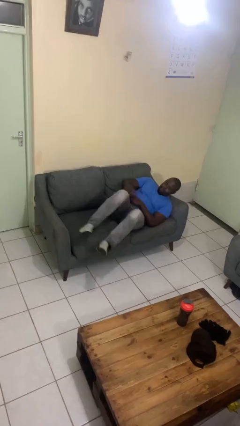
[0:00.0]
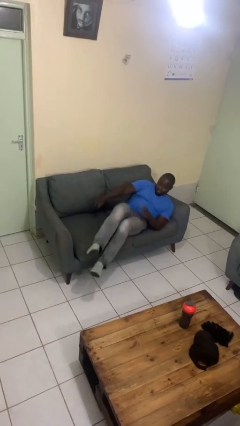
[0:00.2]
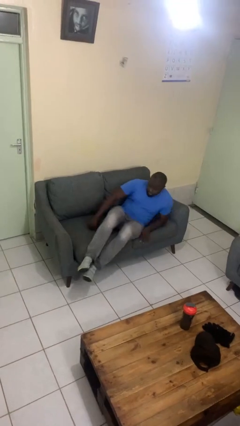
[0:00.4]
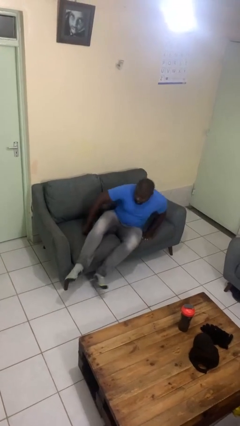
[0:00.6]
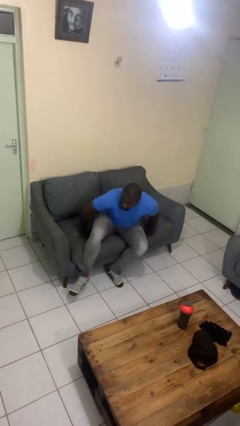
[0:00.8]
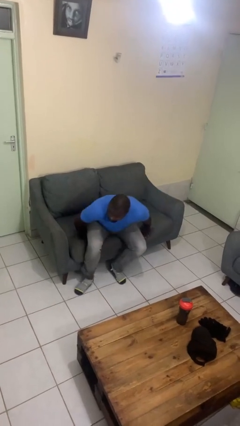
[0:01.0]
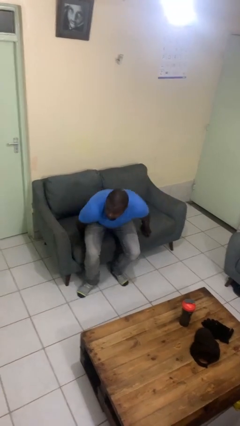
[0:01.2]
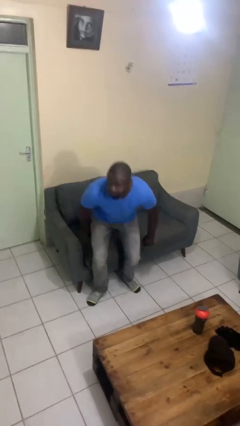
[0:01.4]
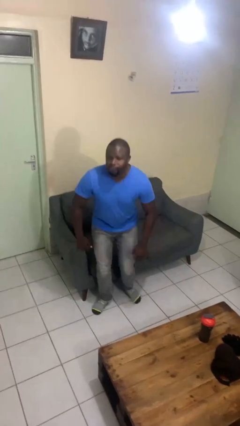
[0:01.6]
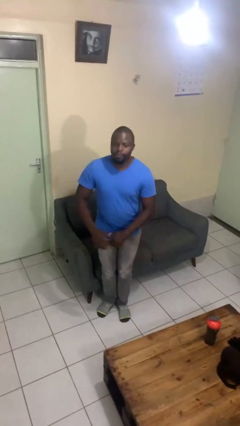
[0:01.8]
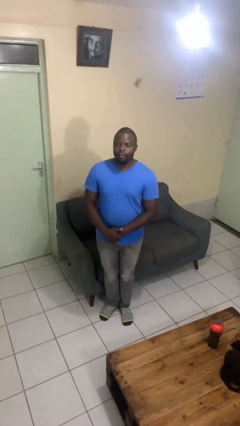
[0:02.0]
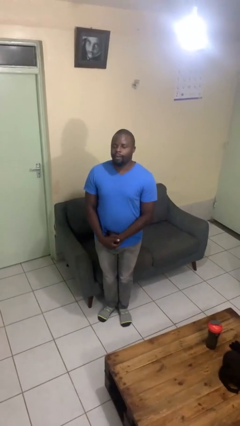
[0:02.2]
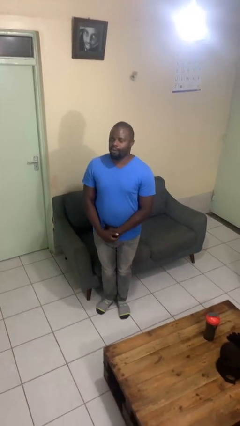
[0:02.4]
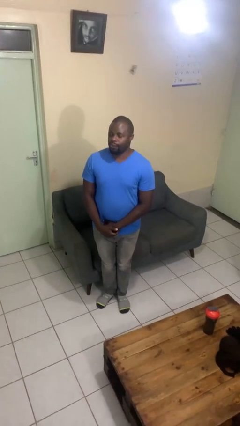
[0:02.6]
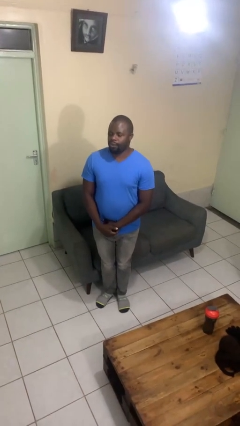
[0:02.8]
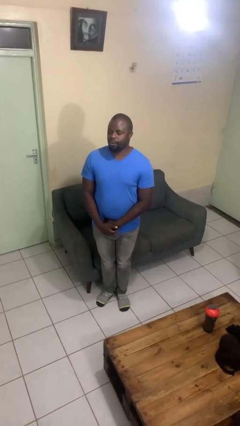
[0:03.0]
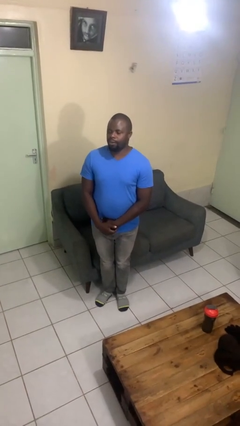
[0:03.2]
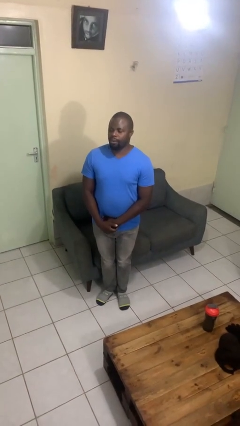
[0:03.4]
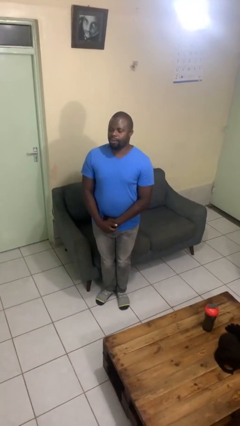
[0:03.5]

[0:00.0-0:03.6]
person stands up

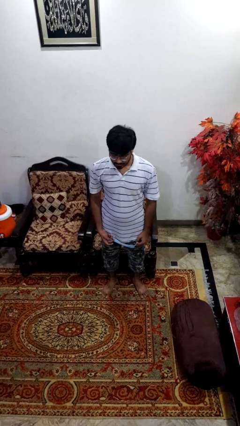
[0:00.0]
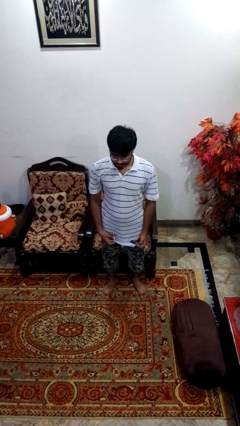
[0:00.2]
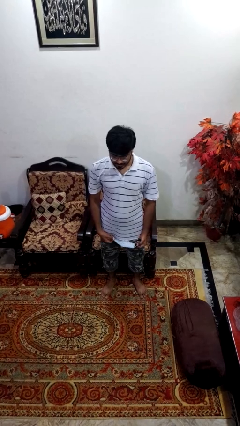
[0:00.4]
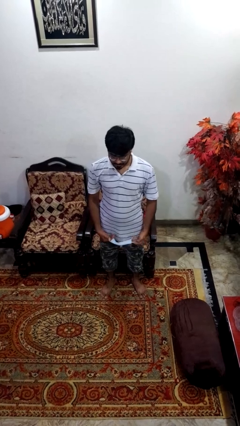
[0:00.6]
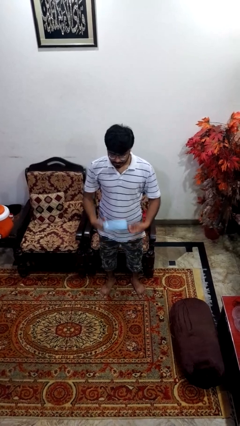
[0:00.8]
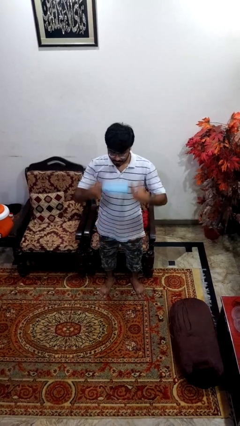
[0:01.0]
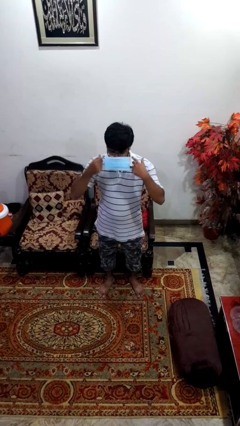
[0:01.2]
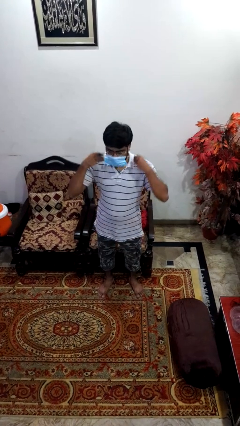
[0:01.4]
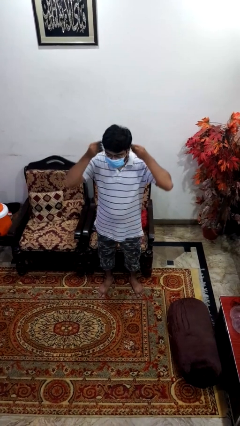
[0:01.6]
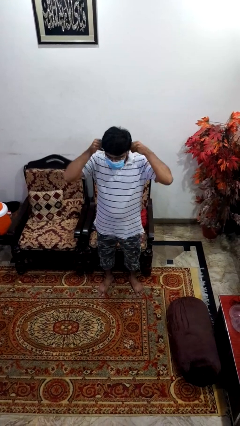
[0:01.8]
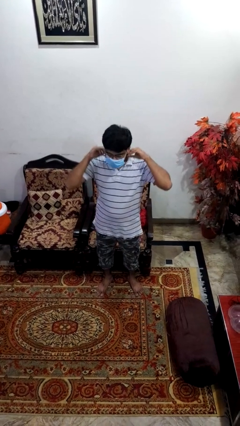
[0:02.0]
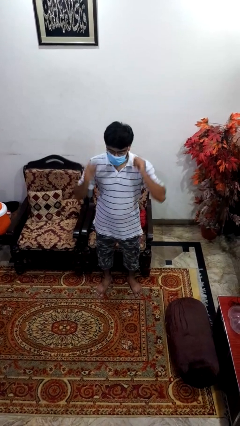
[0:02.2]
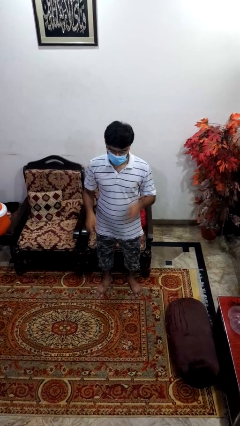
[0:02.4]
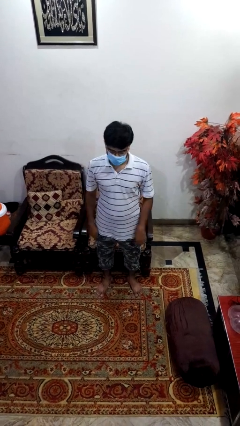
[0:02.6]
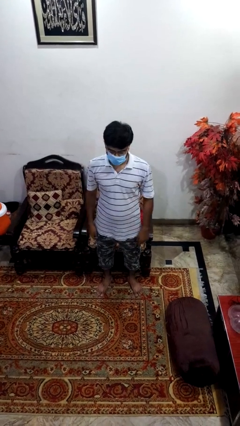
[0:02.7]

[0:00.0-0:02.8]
person puts on facemask

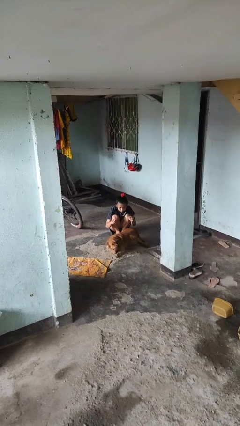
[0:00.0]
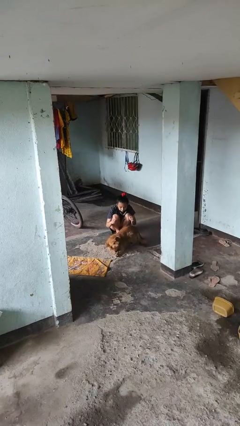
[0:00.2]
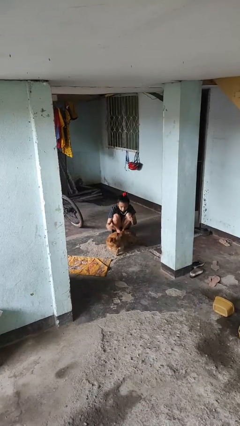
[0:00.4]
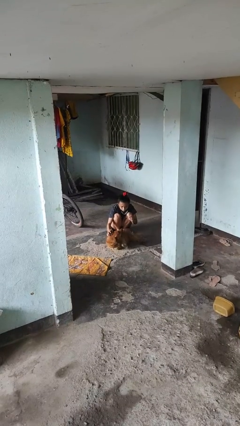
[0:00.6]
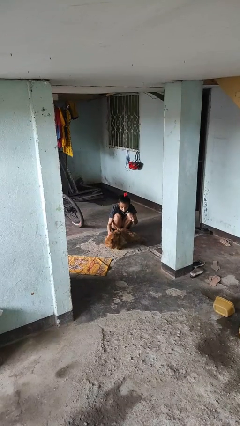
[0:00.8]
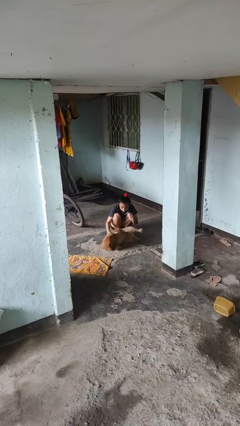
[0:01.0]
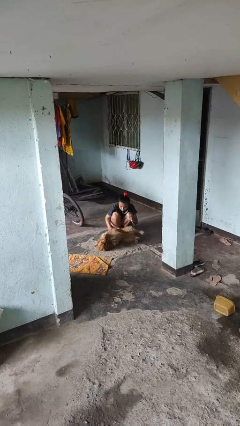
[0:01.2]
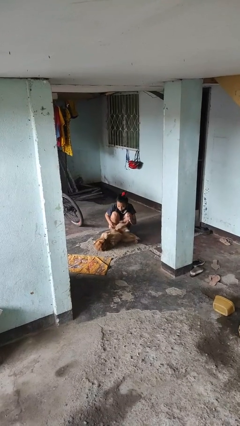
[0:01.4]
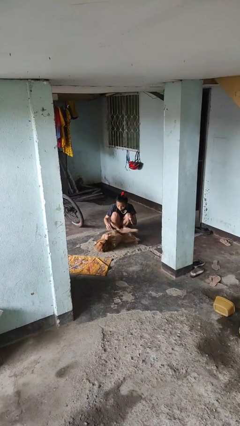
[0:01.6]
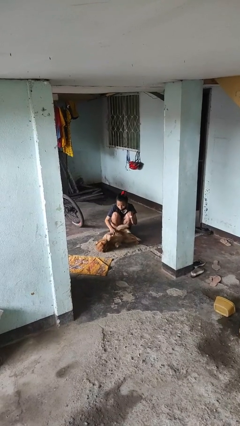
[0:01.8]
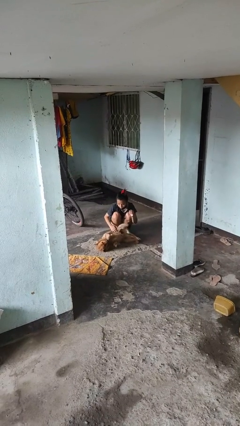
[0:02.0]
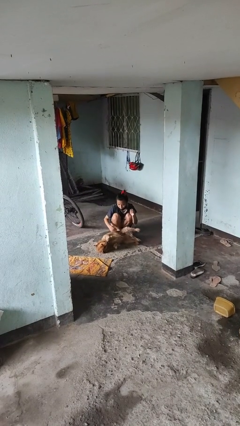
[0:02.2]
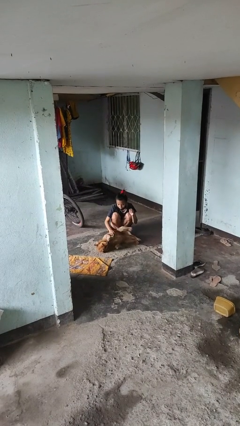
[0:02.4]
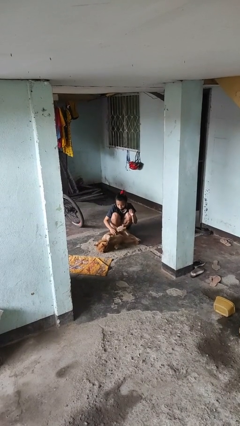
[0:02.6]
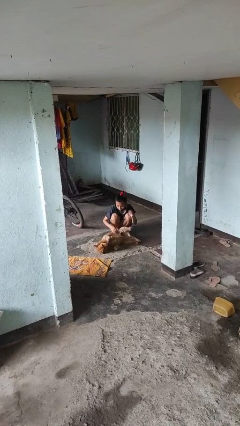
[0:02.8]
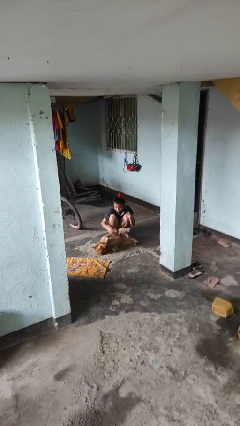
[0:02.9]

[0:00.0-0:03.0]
person pets dog

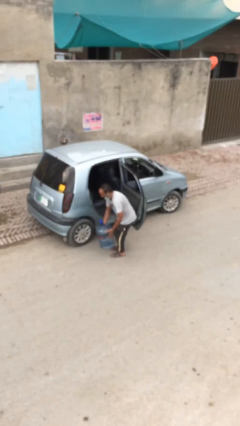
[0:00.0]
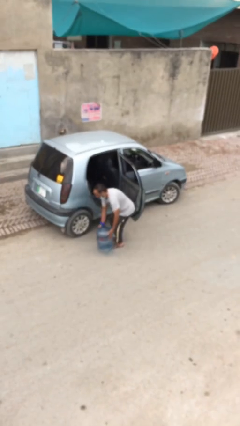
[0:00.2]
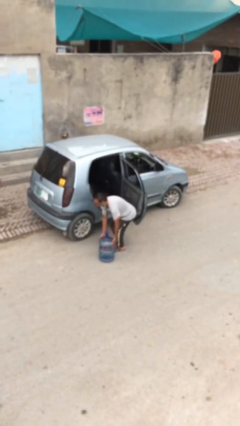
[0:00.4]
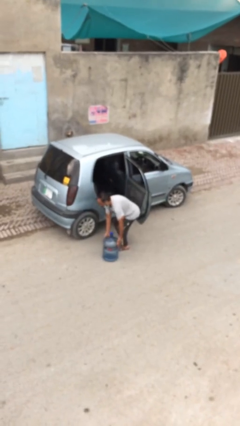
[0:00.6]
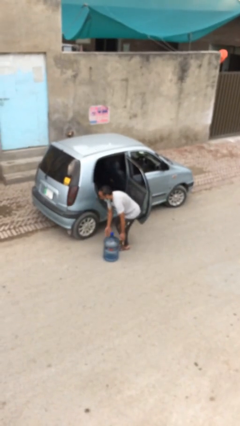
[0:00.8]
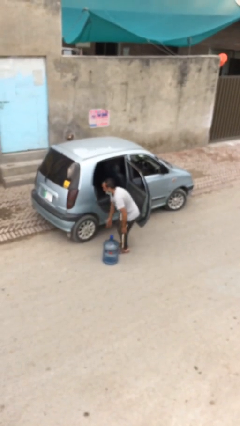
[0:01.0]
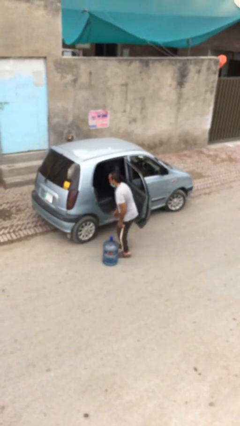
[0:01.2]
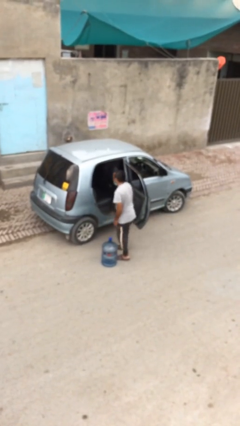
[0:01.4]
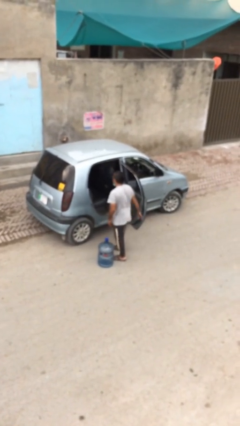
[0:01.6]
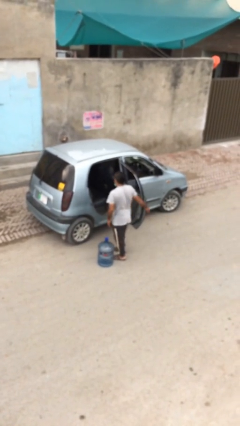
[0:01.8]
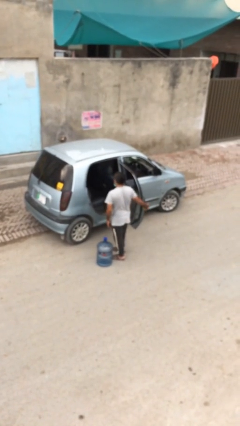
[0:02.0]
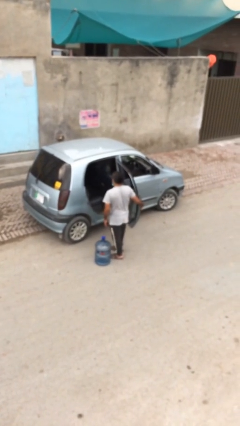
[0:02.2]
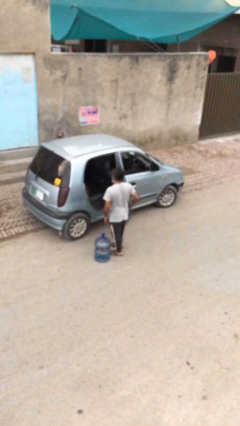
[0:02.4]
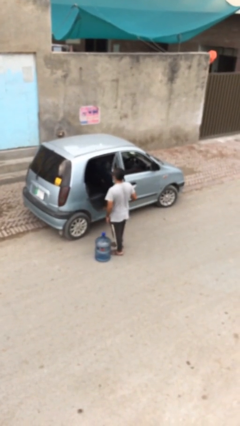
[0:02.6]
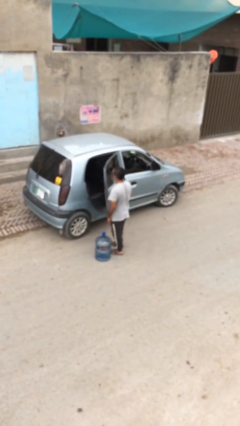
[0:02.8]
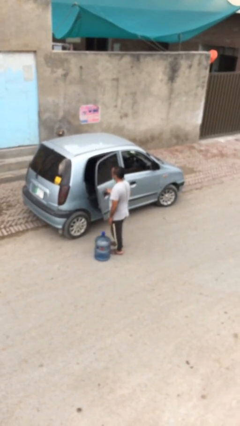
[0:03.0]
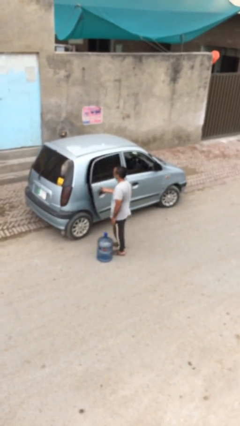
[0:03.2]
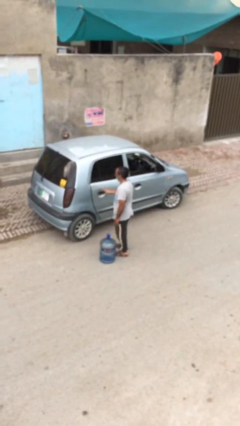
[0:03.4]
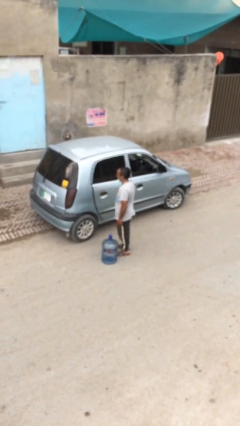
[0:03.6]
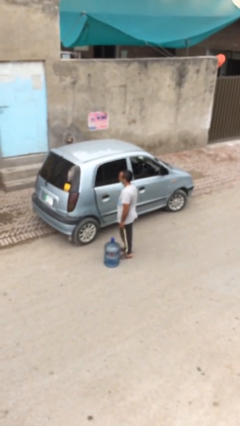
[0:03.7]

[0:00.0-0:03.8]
person closes car door

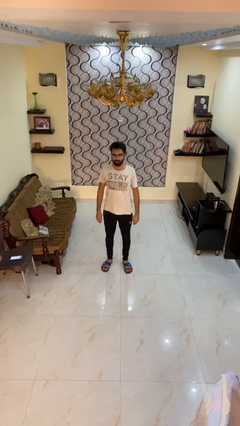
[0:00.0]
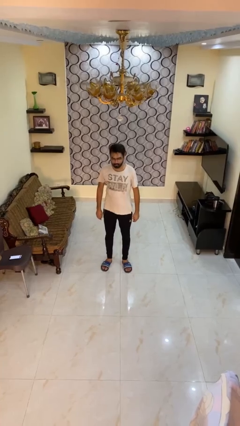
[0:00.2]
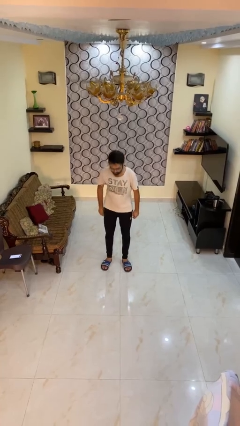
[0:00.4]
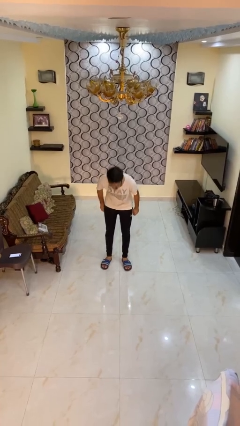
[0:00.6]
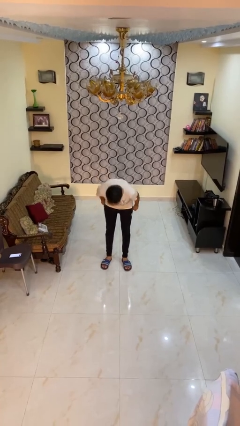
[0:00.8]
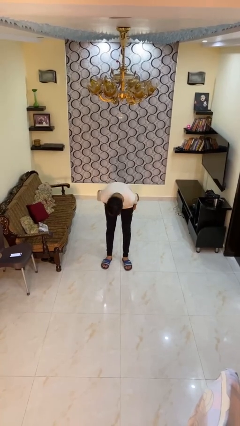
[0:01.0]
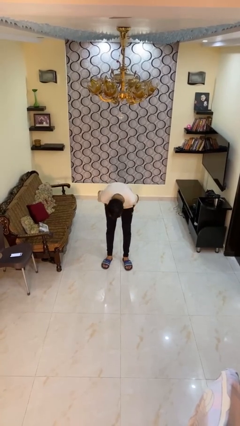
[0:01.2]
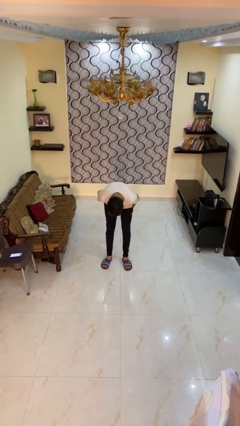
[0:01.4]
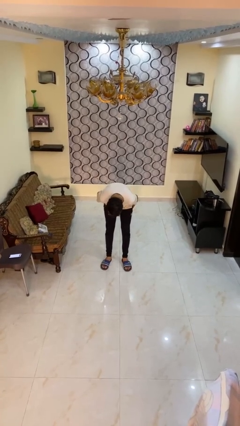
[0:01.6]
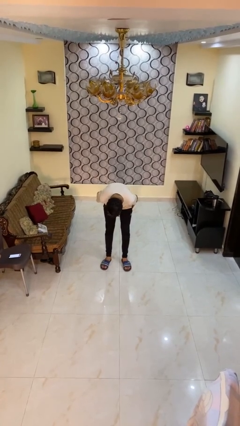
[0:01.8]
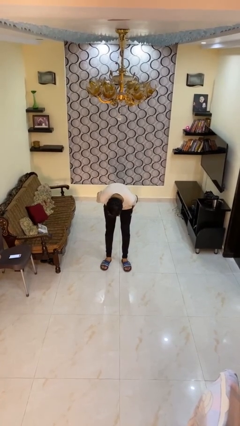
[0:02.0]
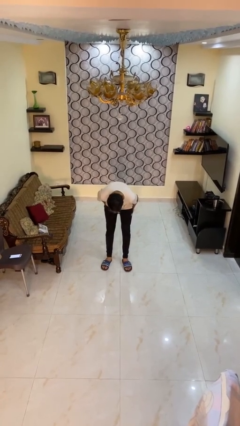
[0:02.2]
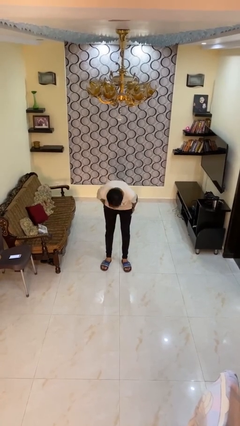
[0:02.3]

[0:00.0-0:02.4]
person bows

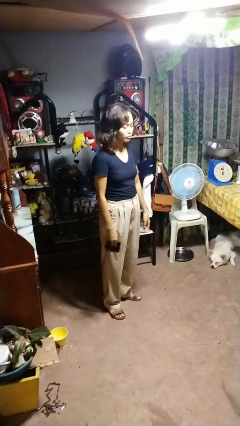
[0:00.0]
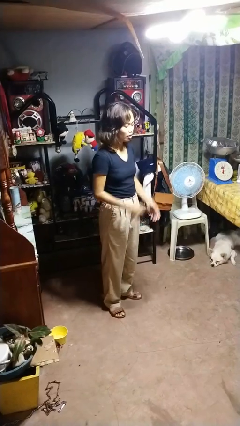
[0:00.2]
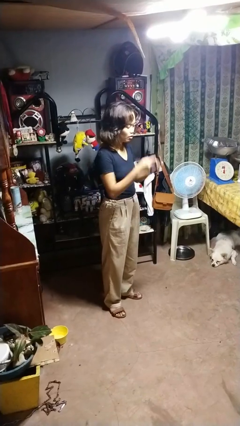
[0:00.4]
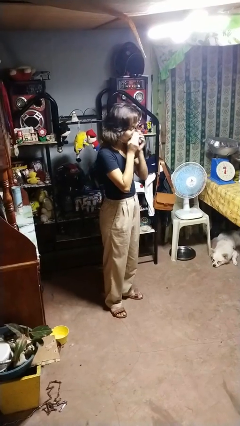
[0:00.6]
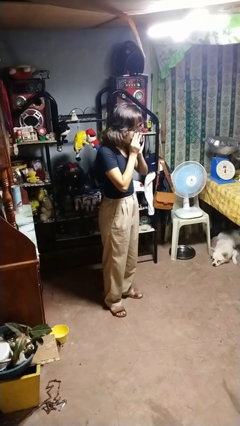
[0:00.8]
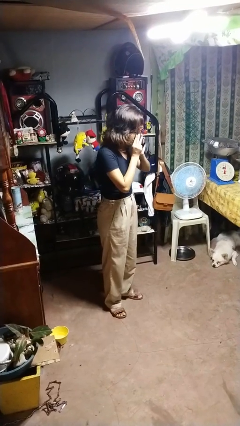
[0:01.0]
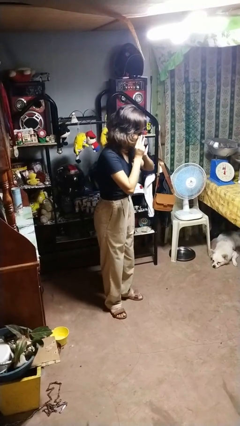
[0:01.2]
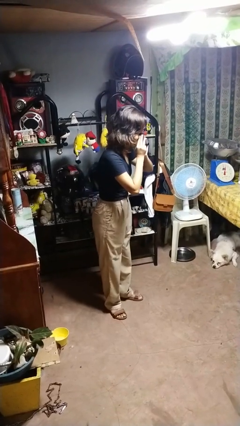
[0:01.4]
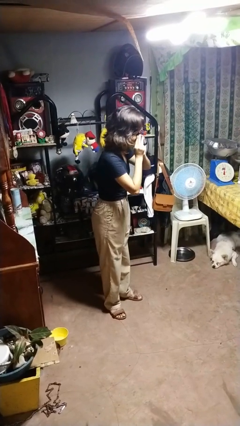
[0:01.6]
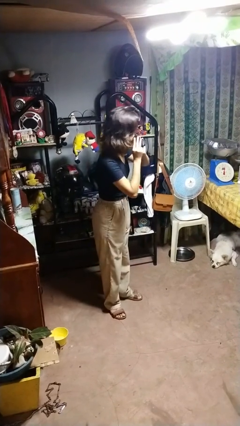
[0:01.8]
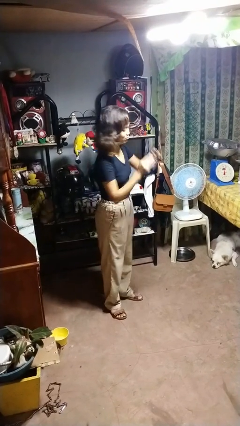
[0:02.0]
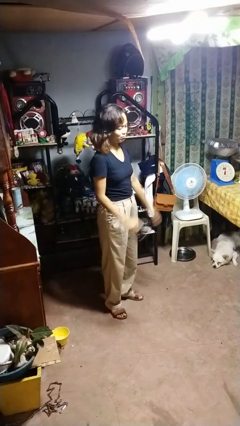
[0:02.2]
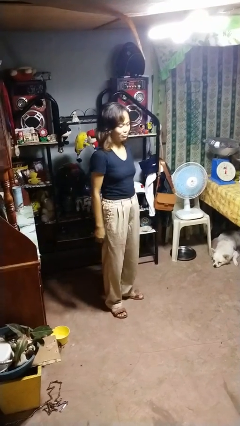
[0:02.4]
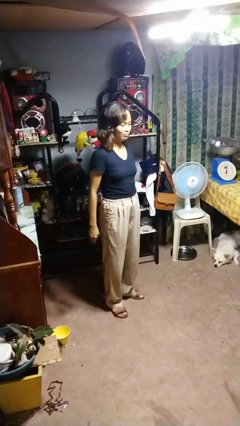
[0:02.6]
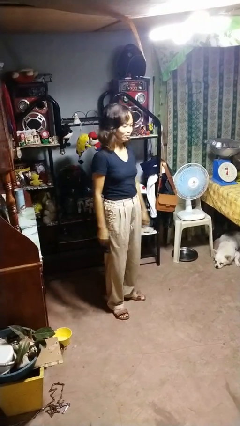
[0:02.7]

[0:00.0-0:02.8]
person blows nose
